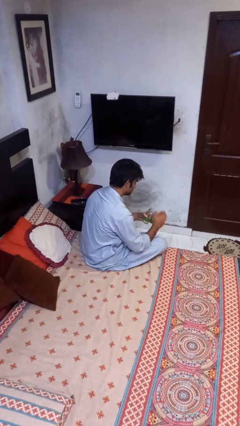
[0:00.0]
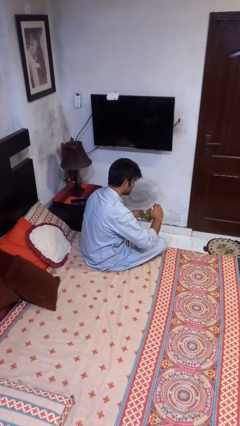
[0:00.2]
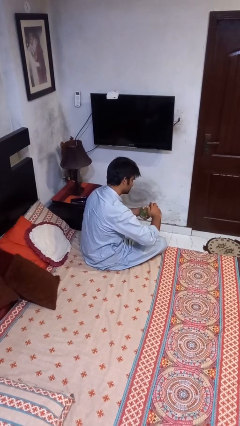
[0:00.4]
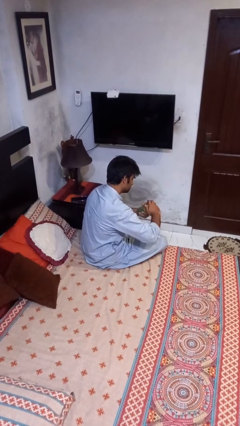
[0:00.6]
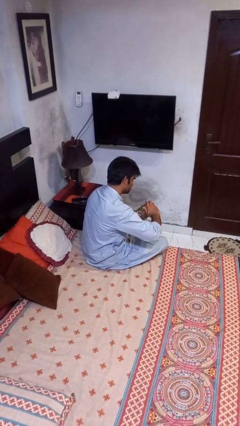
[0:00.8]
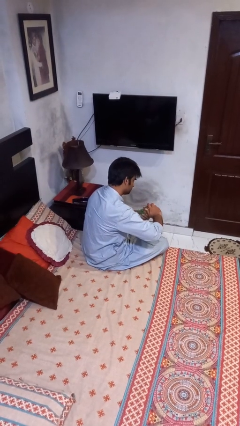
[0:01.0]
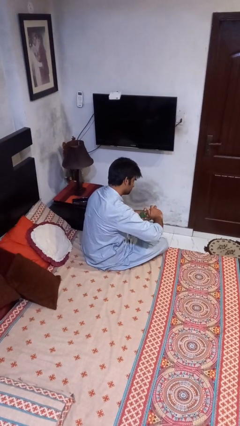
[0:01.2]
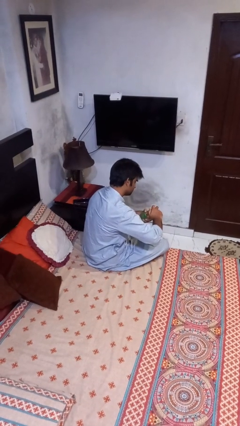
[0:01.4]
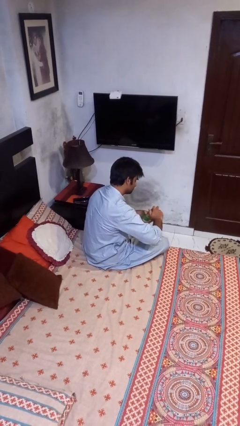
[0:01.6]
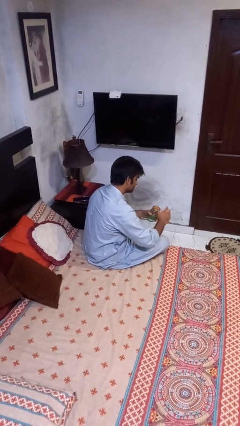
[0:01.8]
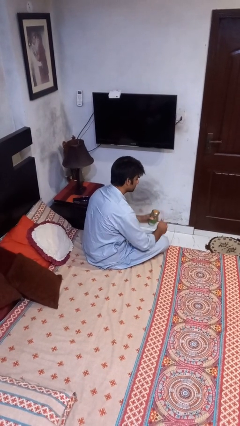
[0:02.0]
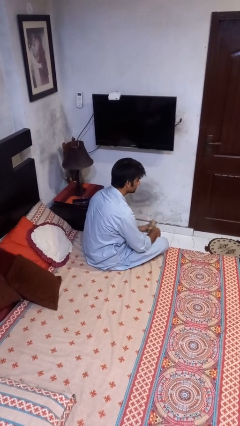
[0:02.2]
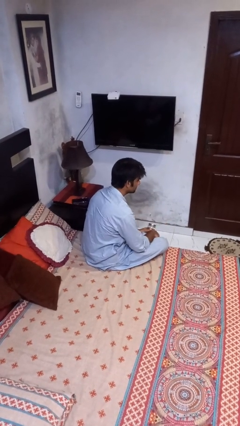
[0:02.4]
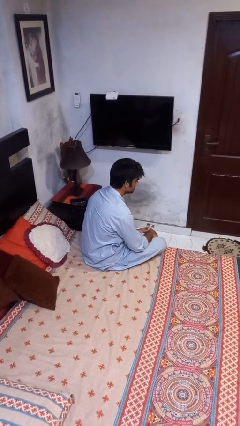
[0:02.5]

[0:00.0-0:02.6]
person closes jar

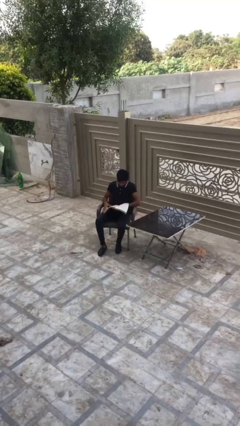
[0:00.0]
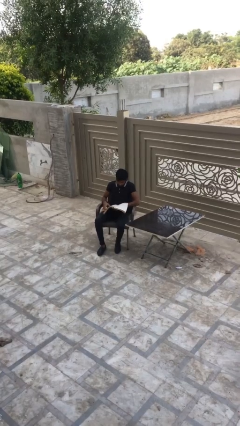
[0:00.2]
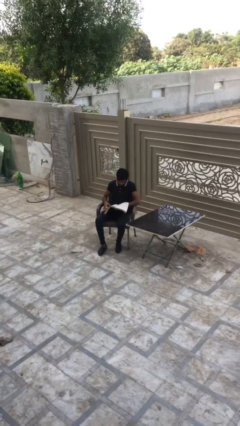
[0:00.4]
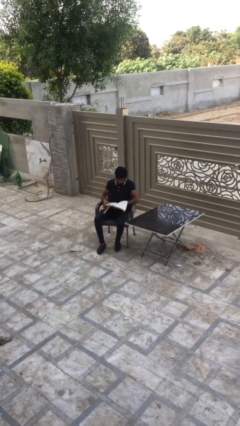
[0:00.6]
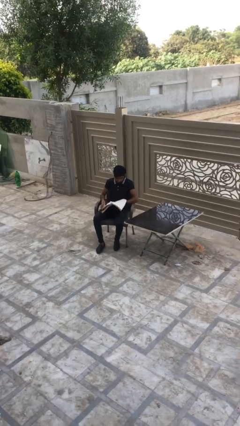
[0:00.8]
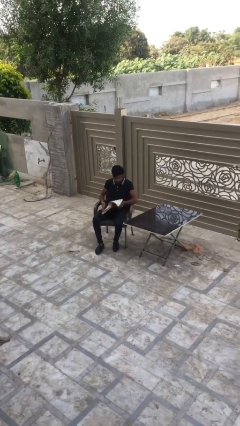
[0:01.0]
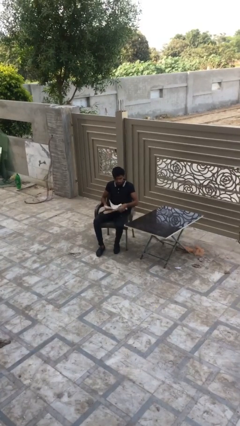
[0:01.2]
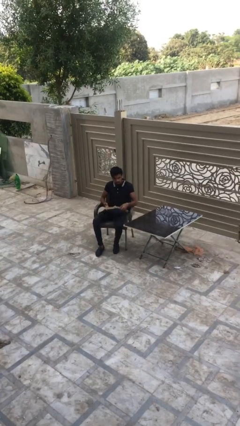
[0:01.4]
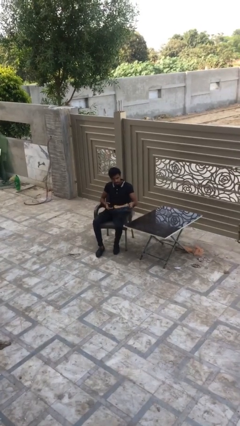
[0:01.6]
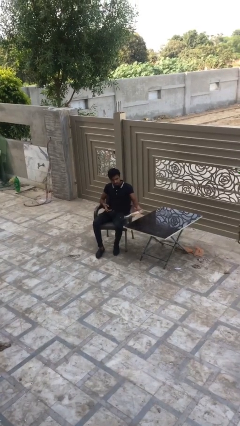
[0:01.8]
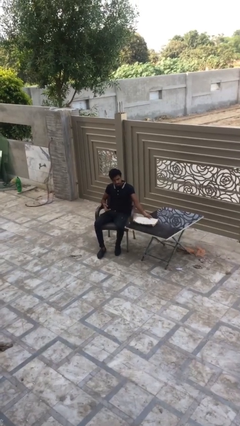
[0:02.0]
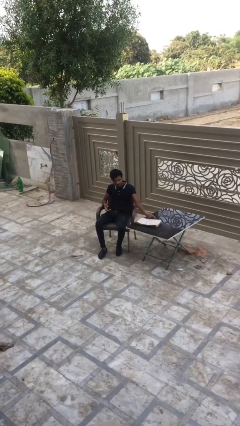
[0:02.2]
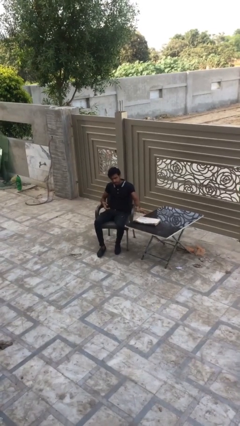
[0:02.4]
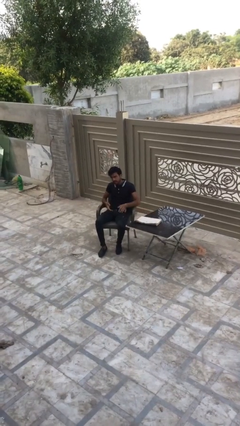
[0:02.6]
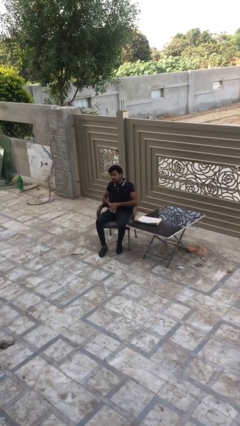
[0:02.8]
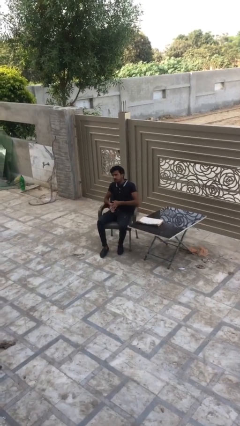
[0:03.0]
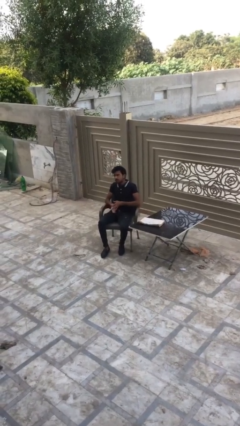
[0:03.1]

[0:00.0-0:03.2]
person puts down object on table

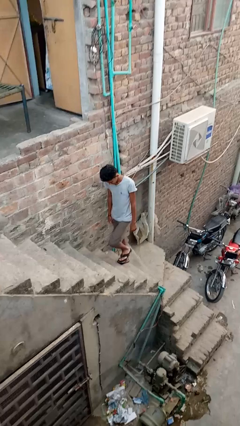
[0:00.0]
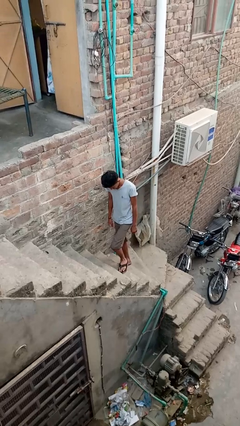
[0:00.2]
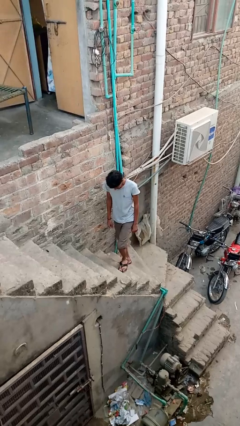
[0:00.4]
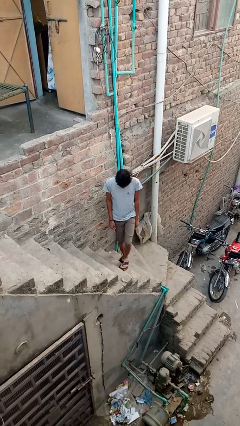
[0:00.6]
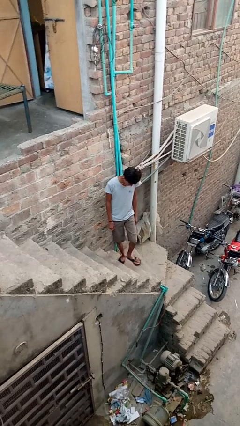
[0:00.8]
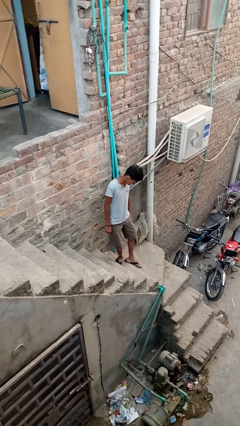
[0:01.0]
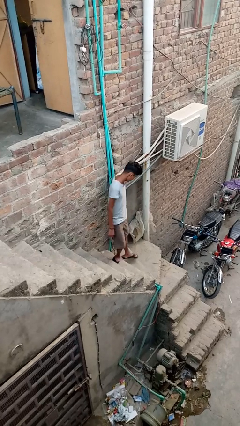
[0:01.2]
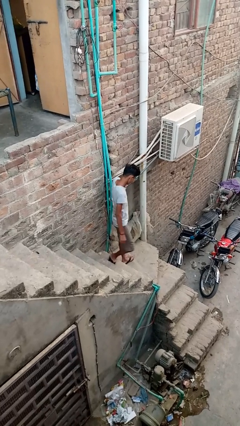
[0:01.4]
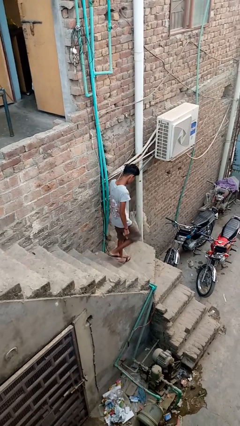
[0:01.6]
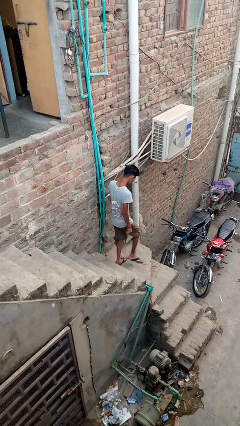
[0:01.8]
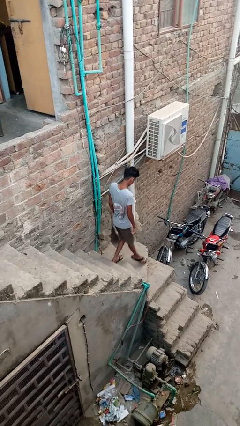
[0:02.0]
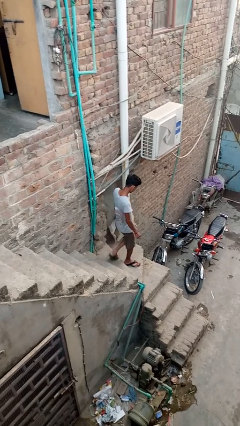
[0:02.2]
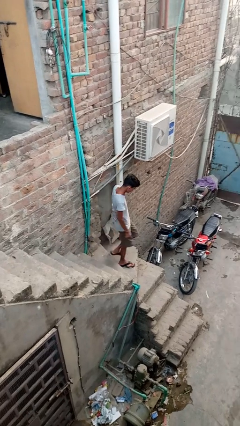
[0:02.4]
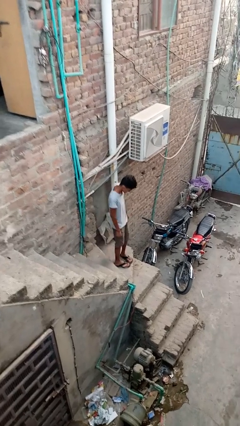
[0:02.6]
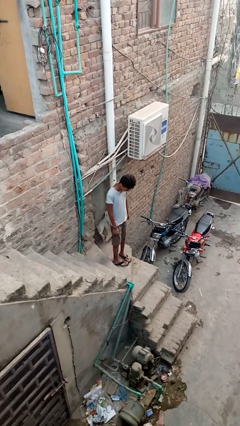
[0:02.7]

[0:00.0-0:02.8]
person climbs down stairs

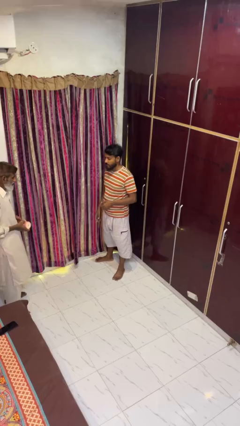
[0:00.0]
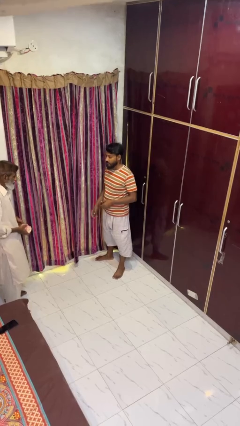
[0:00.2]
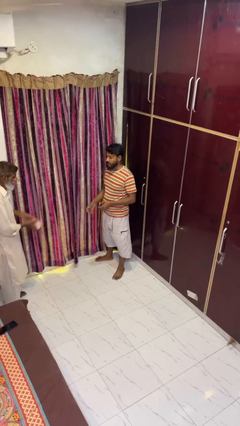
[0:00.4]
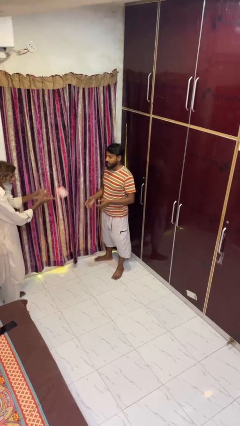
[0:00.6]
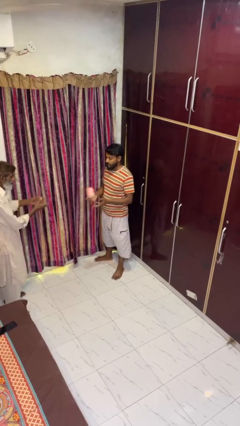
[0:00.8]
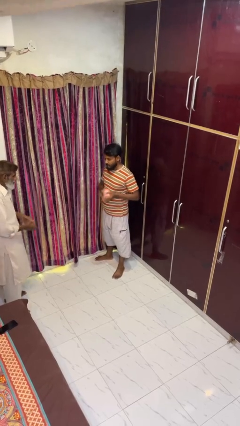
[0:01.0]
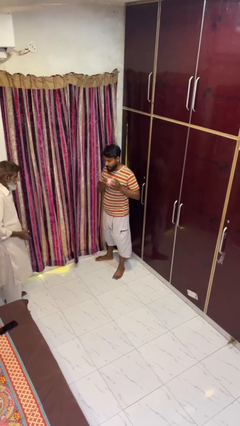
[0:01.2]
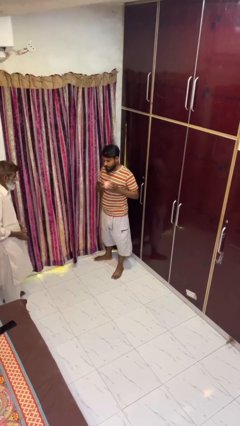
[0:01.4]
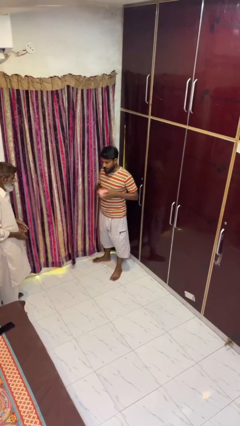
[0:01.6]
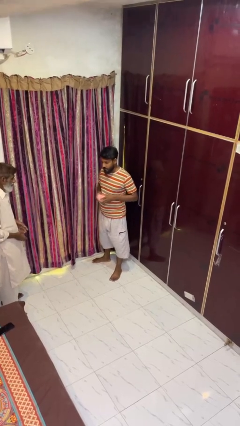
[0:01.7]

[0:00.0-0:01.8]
person catches object from person

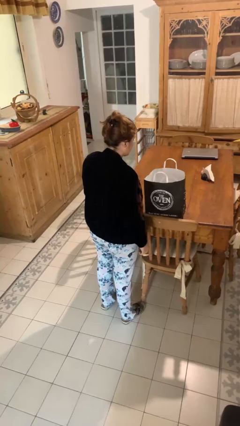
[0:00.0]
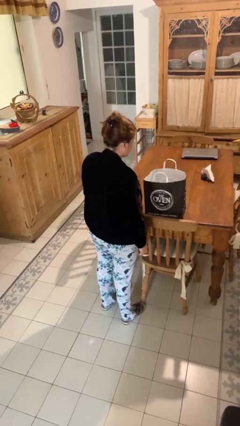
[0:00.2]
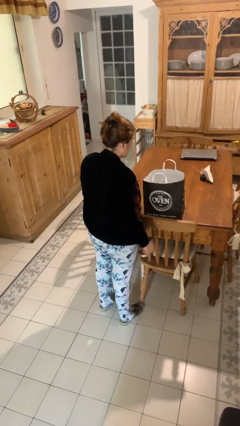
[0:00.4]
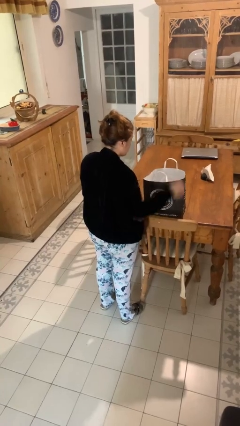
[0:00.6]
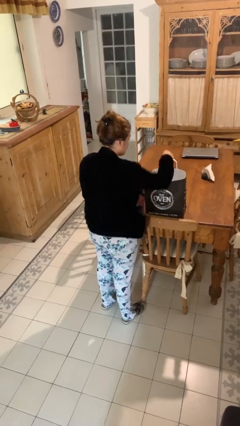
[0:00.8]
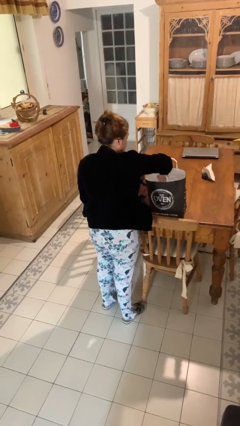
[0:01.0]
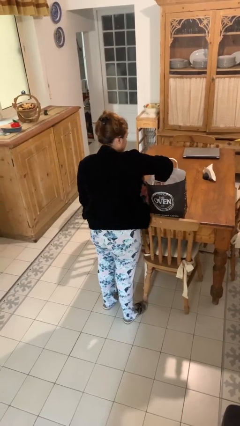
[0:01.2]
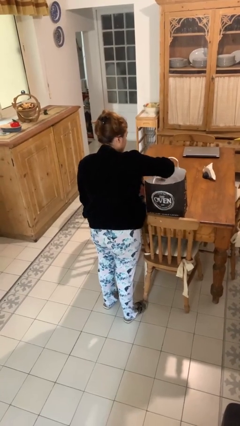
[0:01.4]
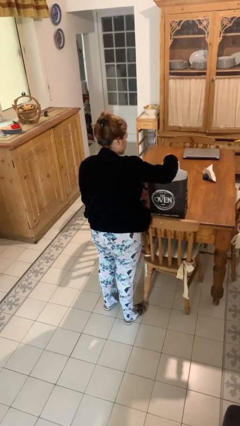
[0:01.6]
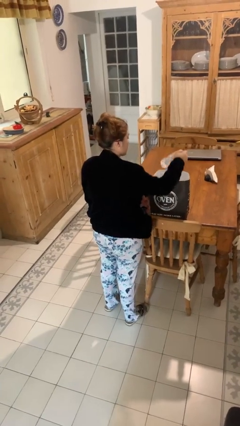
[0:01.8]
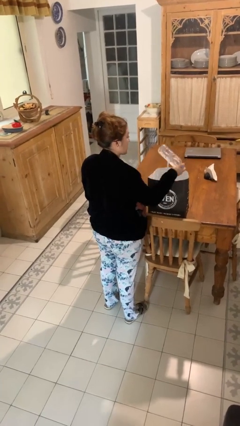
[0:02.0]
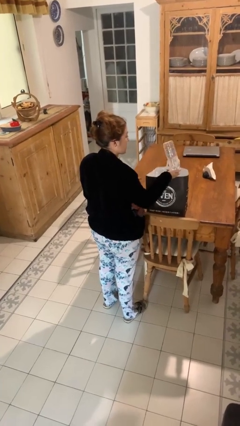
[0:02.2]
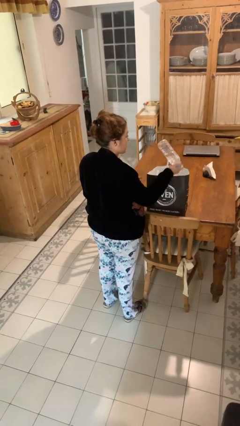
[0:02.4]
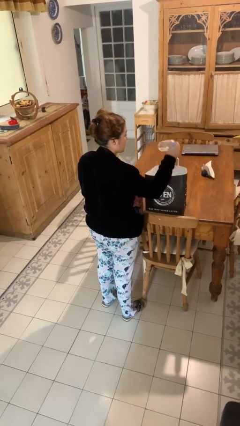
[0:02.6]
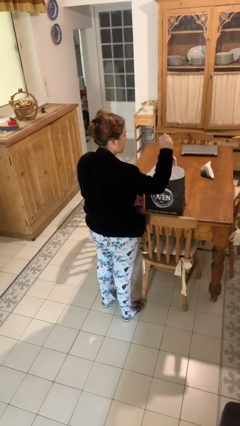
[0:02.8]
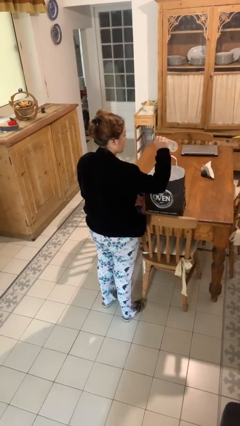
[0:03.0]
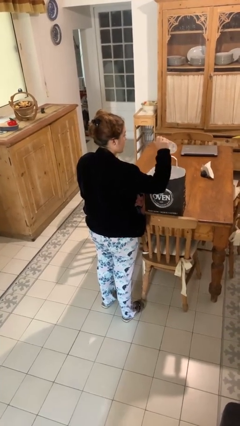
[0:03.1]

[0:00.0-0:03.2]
person takes object from bag

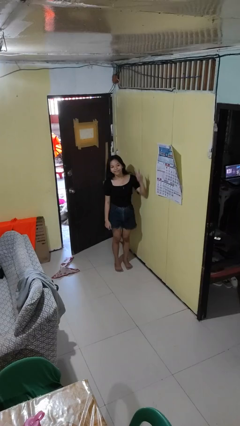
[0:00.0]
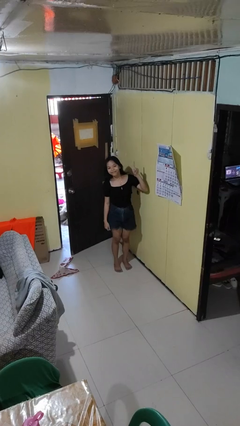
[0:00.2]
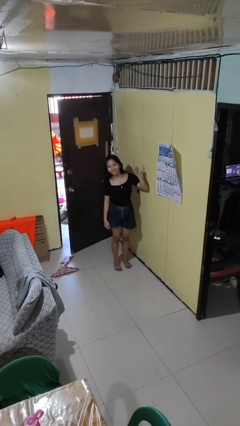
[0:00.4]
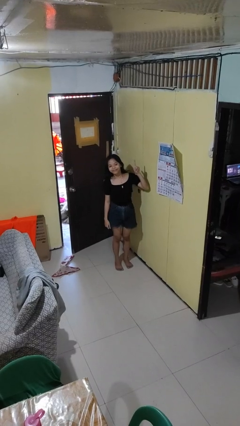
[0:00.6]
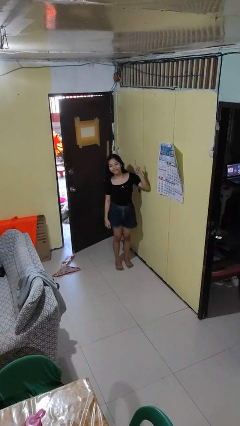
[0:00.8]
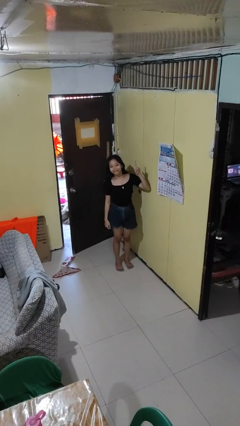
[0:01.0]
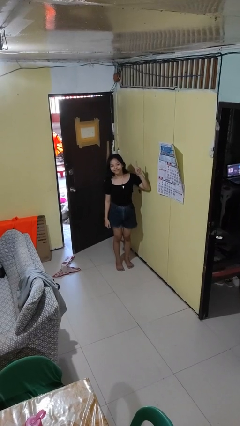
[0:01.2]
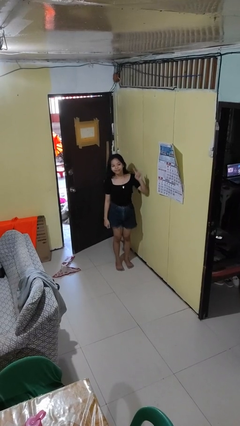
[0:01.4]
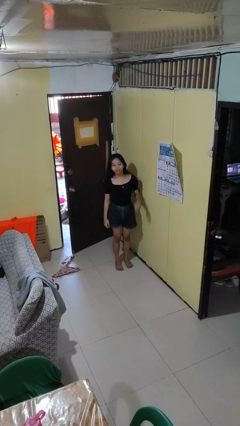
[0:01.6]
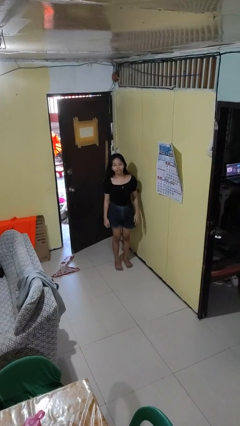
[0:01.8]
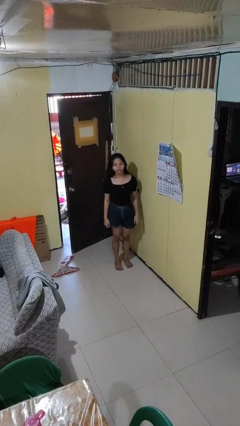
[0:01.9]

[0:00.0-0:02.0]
person gestures peace

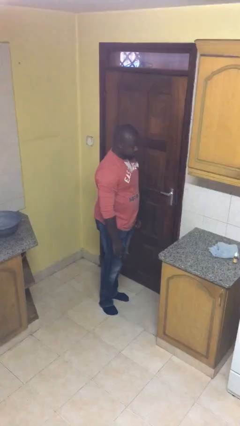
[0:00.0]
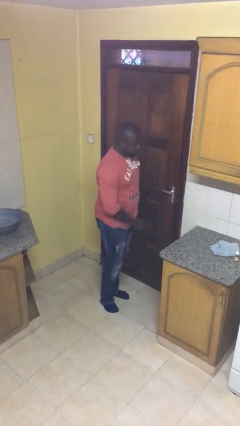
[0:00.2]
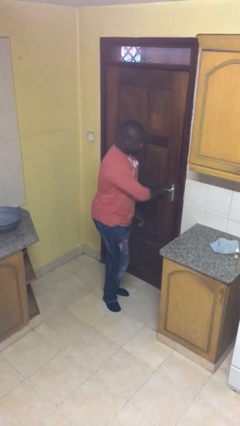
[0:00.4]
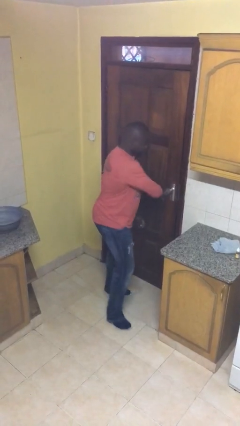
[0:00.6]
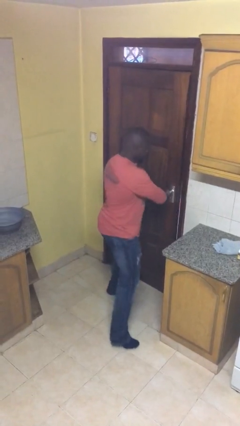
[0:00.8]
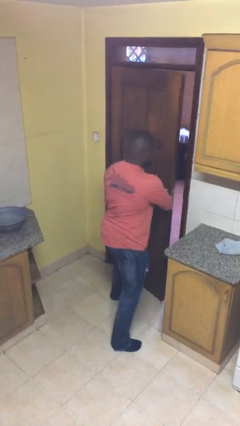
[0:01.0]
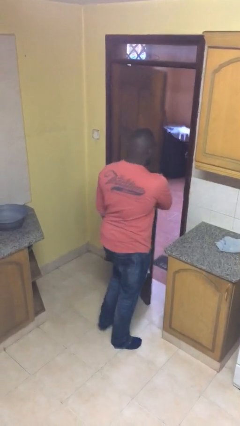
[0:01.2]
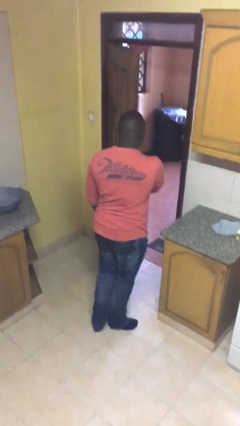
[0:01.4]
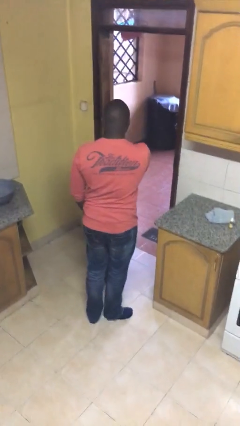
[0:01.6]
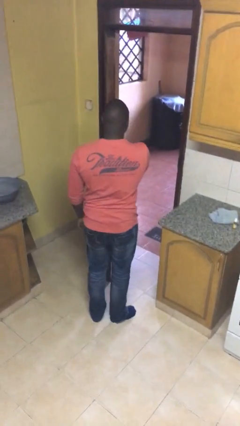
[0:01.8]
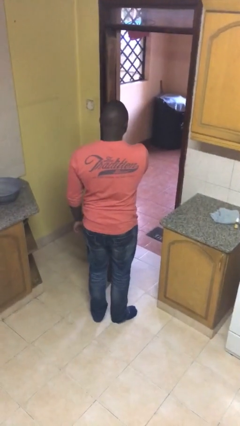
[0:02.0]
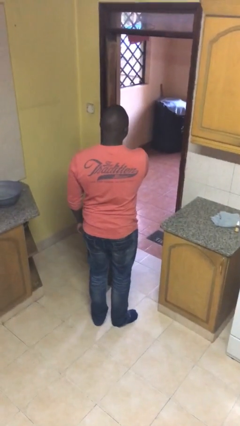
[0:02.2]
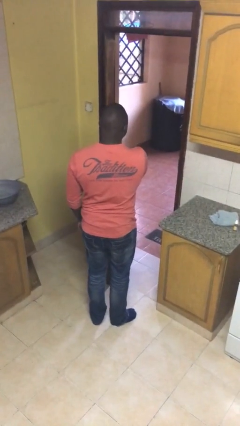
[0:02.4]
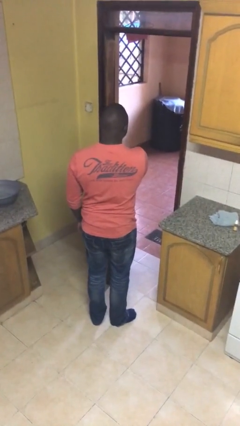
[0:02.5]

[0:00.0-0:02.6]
person opens facility door
